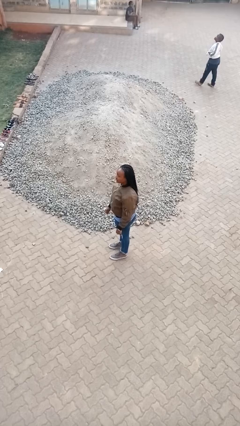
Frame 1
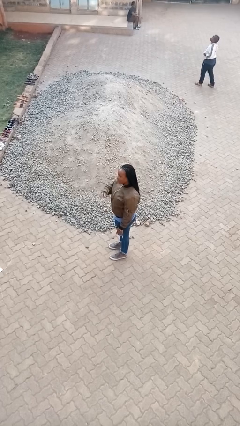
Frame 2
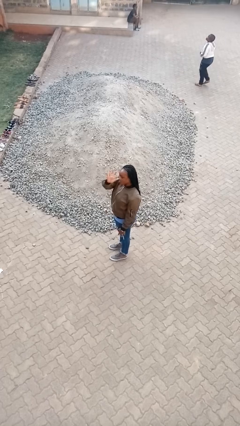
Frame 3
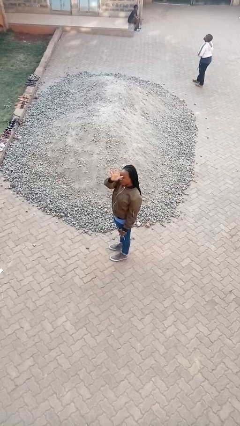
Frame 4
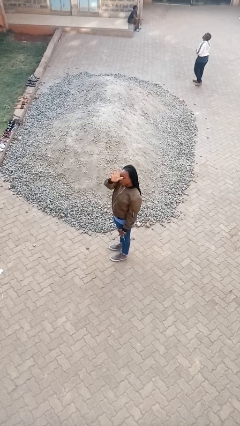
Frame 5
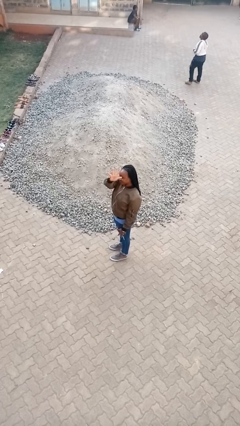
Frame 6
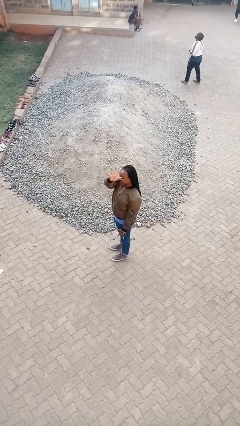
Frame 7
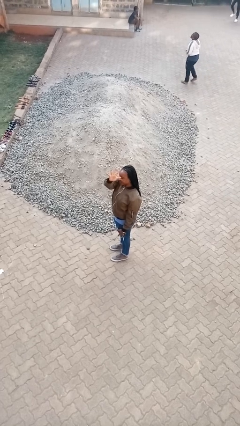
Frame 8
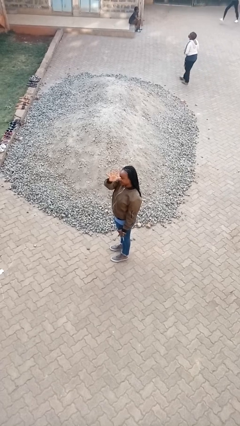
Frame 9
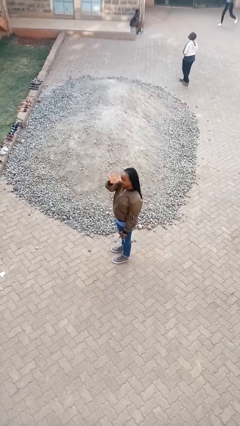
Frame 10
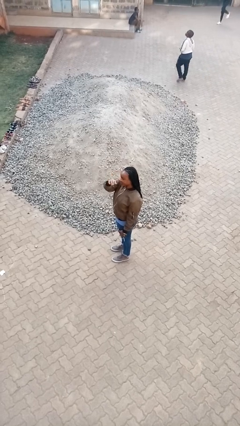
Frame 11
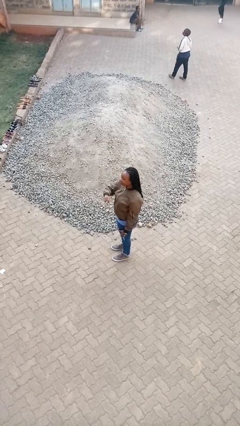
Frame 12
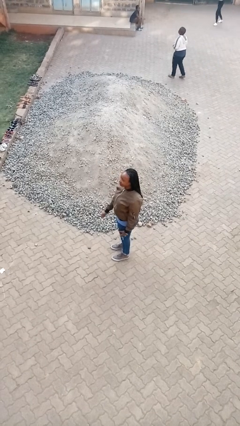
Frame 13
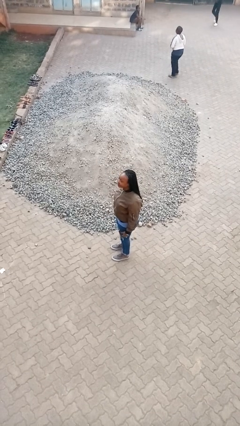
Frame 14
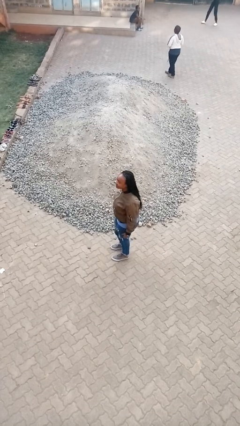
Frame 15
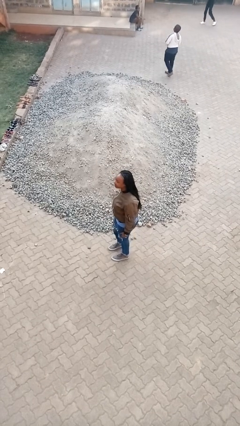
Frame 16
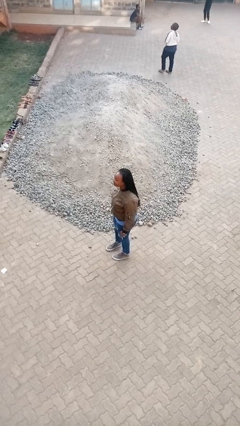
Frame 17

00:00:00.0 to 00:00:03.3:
person gestures number five

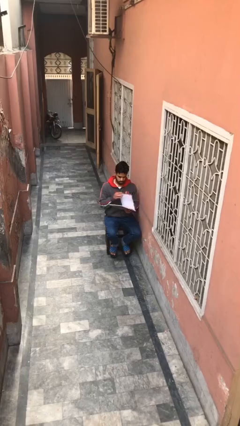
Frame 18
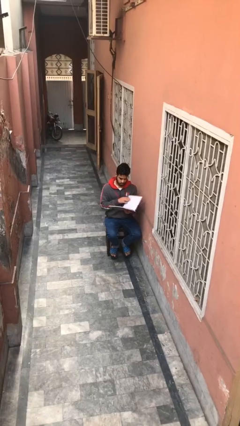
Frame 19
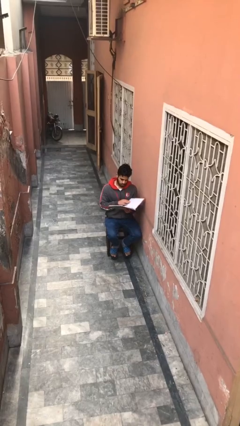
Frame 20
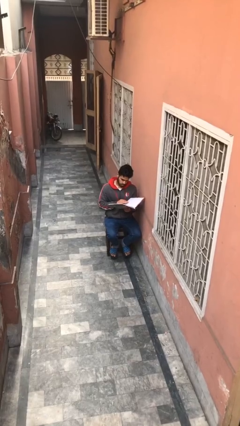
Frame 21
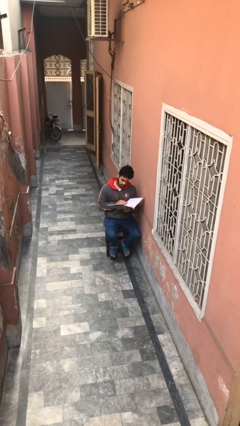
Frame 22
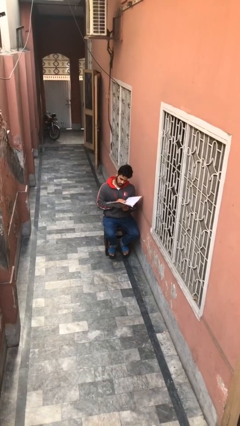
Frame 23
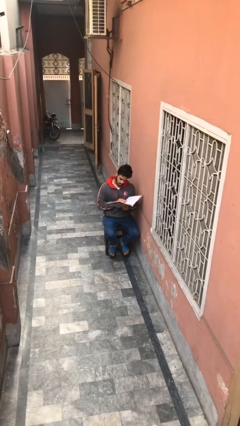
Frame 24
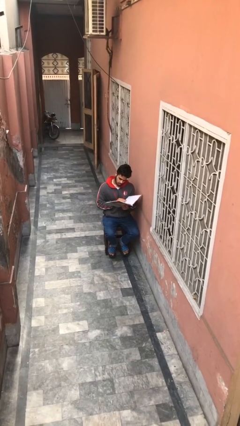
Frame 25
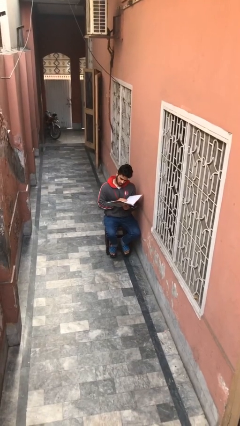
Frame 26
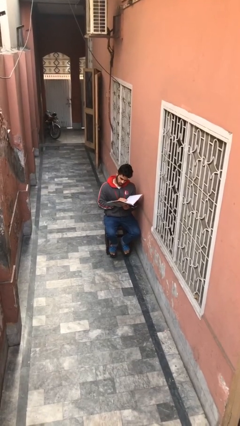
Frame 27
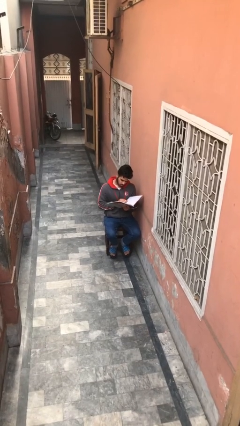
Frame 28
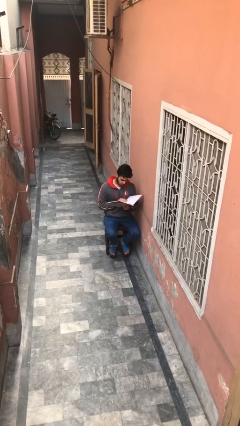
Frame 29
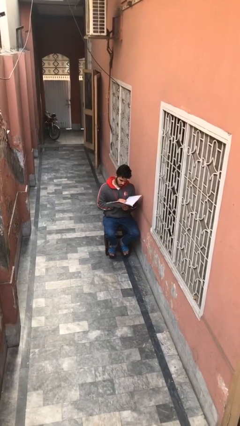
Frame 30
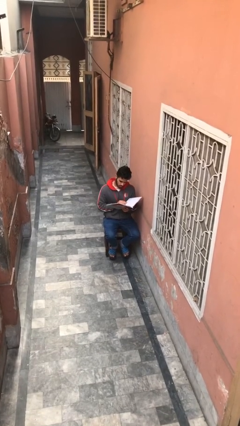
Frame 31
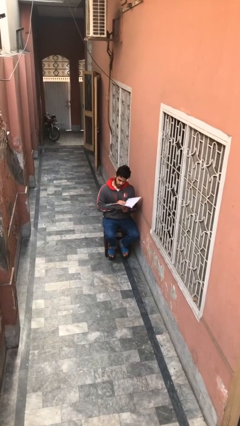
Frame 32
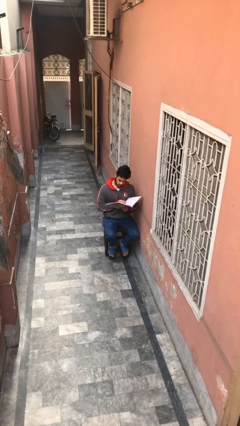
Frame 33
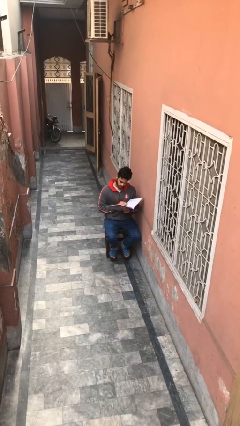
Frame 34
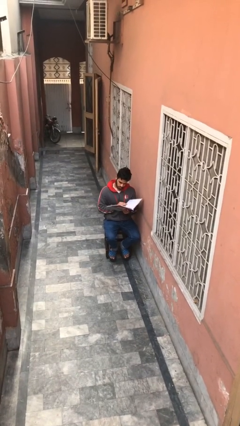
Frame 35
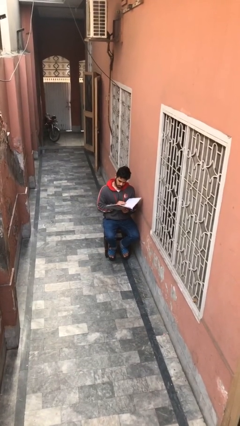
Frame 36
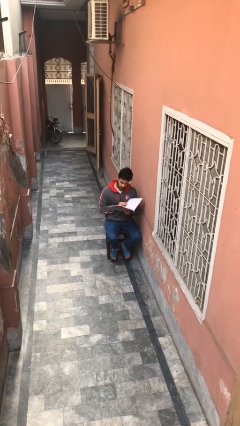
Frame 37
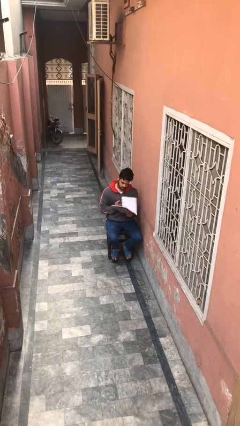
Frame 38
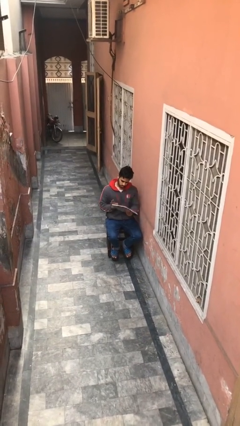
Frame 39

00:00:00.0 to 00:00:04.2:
person reads document

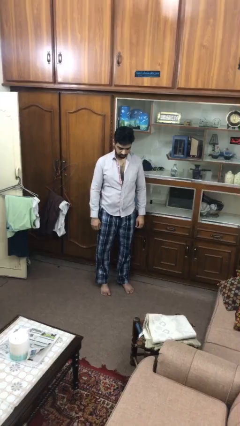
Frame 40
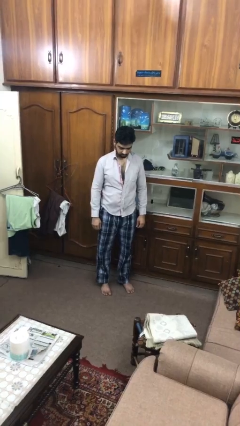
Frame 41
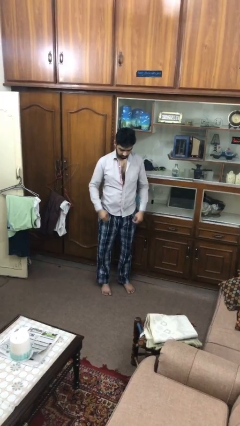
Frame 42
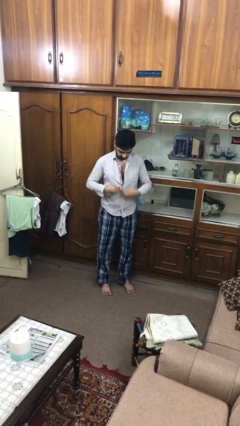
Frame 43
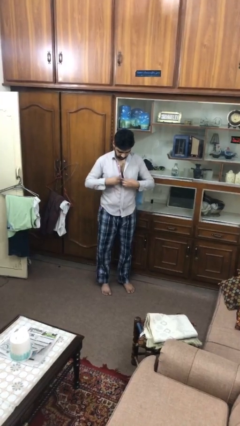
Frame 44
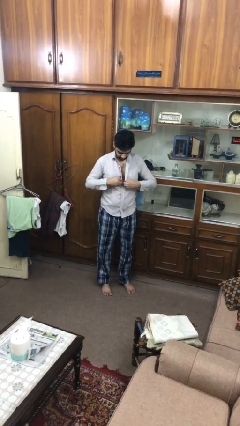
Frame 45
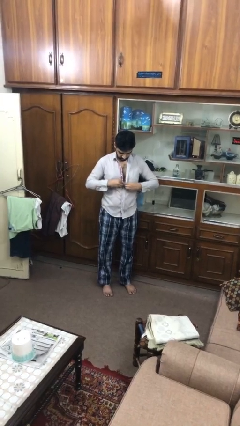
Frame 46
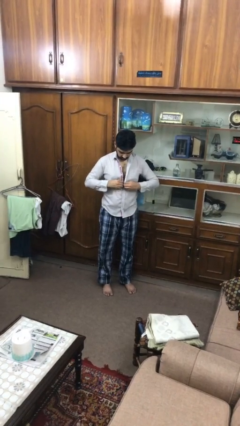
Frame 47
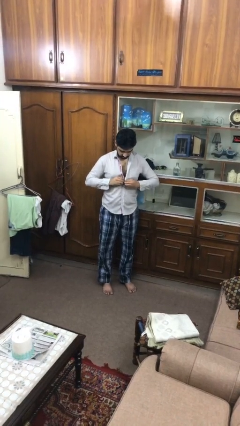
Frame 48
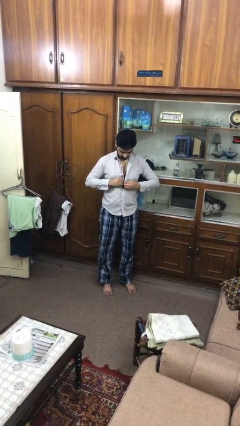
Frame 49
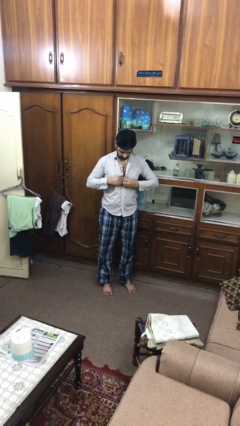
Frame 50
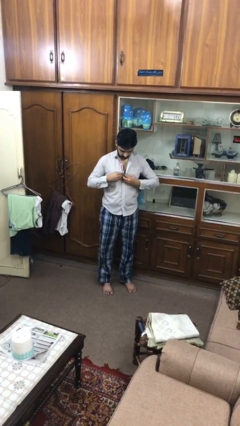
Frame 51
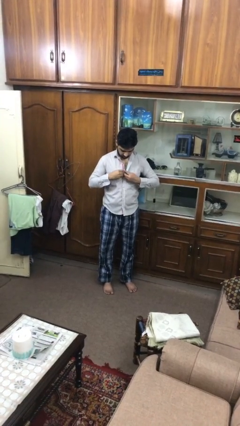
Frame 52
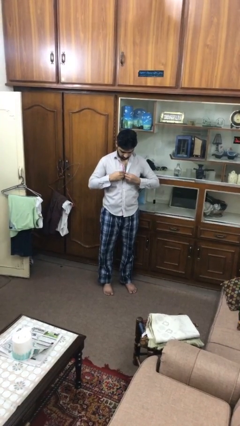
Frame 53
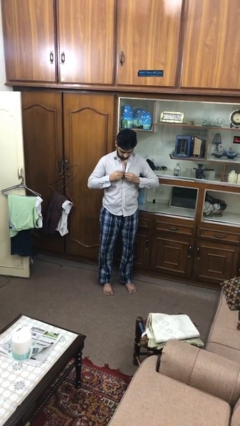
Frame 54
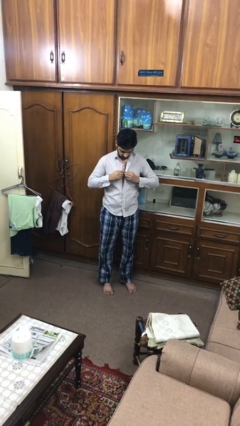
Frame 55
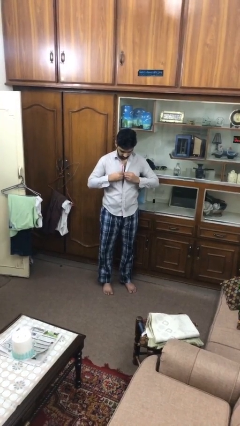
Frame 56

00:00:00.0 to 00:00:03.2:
person buttons shirt

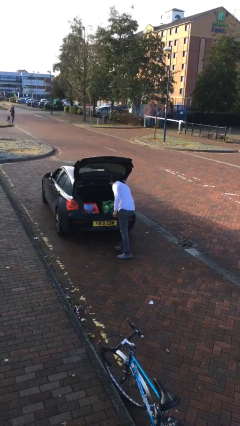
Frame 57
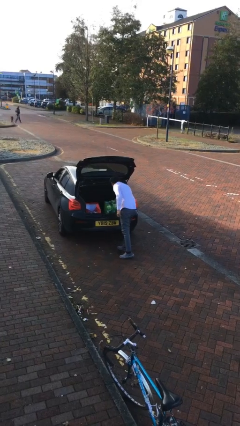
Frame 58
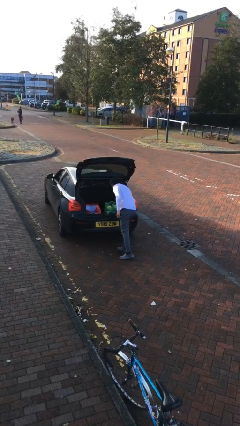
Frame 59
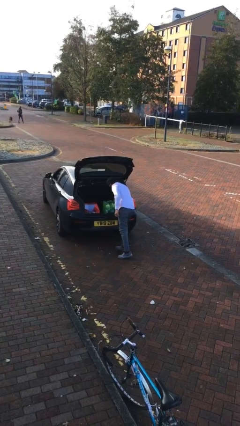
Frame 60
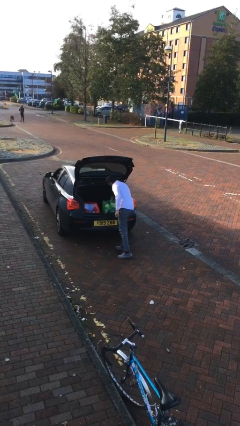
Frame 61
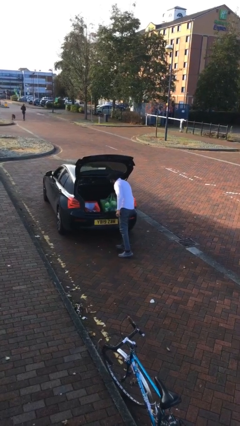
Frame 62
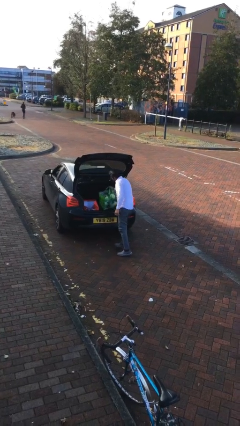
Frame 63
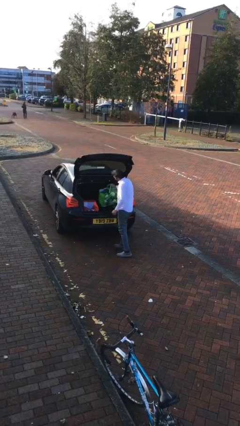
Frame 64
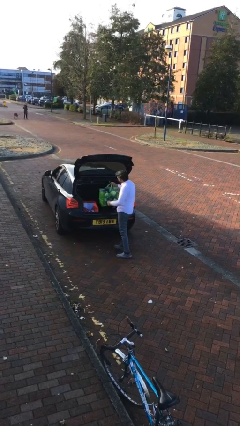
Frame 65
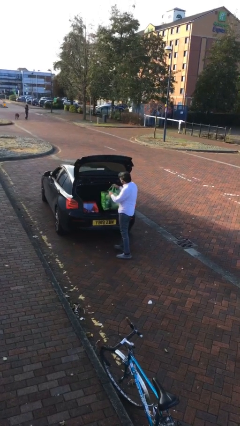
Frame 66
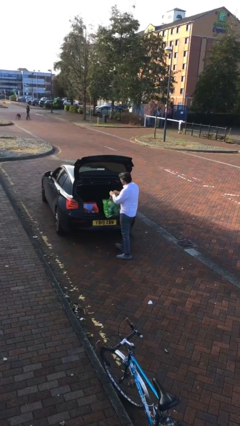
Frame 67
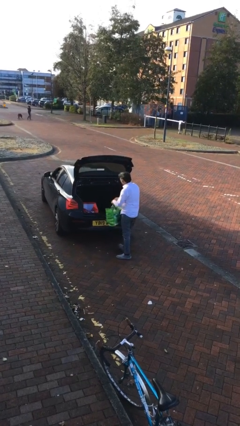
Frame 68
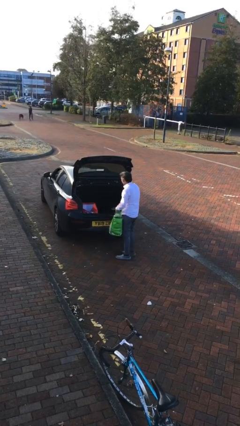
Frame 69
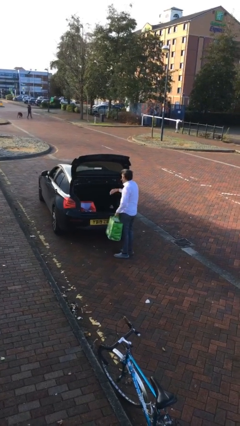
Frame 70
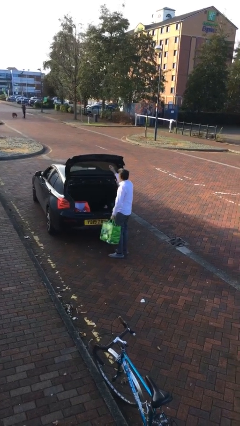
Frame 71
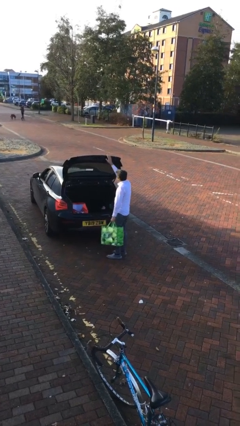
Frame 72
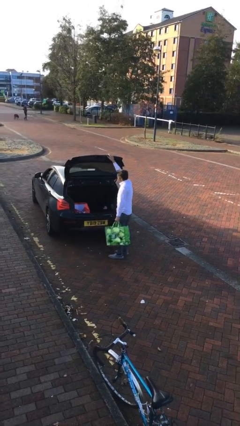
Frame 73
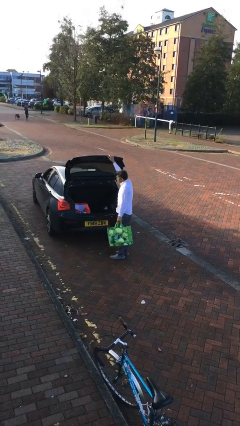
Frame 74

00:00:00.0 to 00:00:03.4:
person unloads car

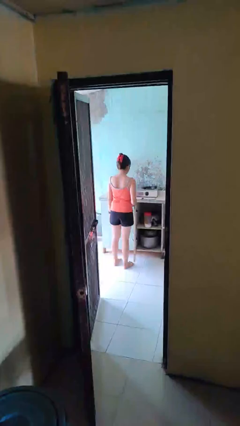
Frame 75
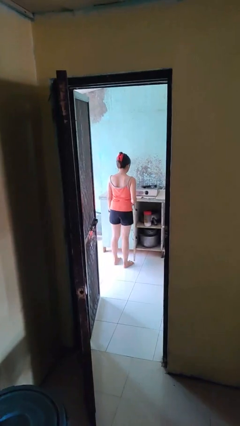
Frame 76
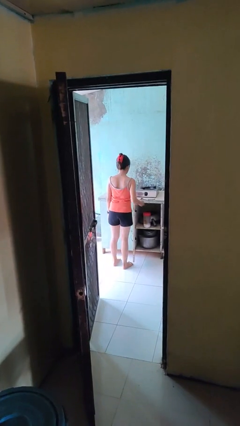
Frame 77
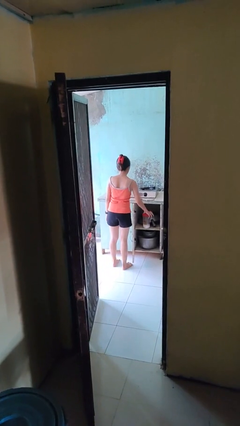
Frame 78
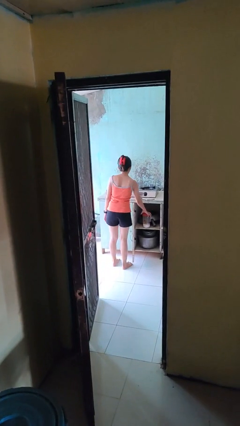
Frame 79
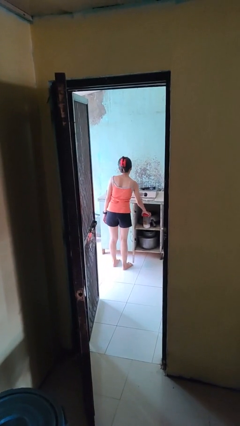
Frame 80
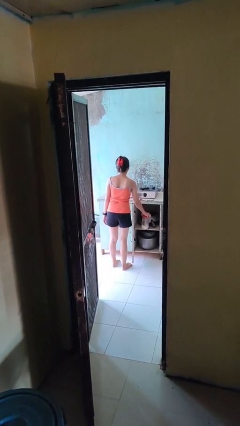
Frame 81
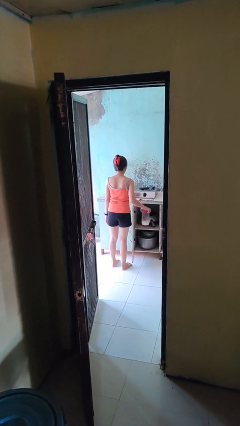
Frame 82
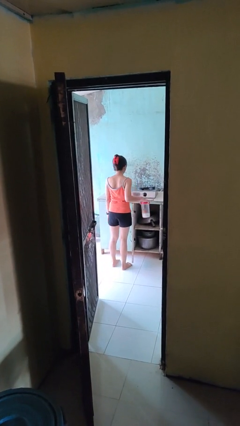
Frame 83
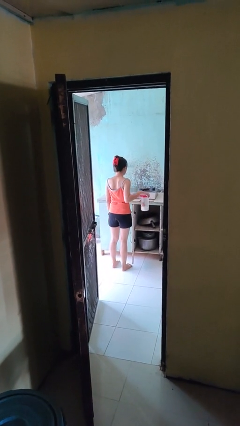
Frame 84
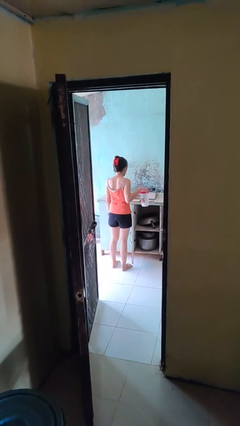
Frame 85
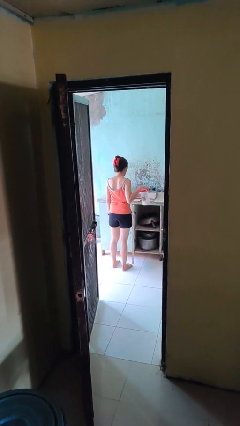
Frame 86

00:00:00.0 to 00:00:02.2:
person picks up object from cabinet

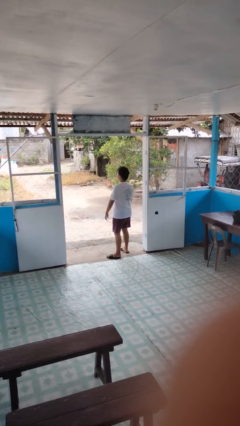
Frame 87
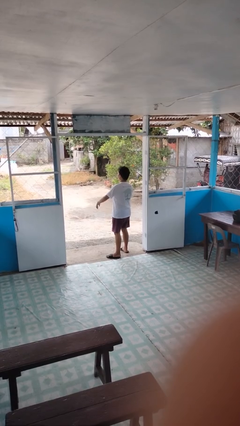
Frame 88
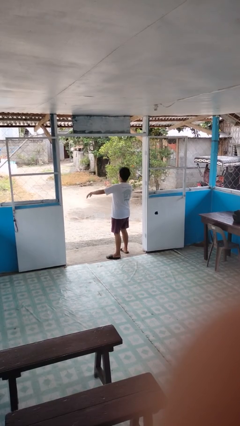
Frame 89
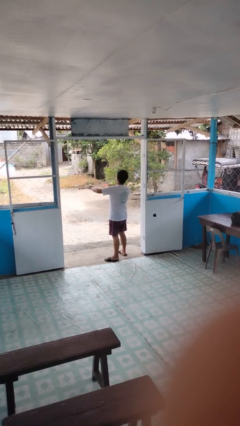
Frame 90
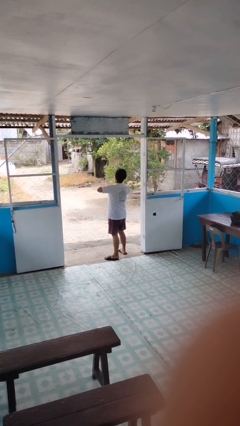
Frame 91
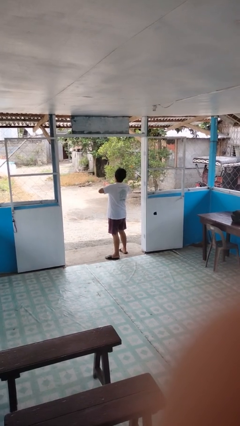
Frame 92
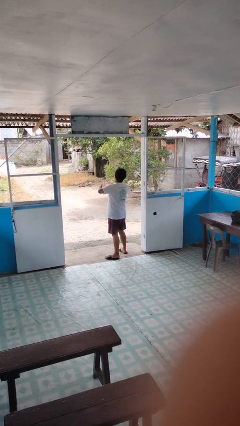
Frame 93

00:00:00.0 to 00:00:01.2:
person drums on chest
